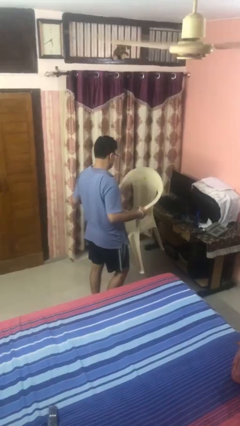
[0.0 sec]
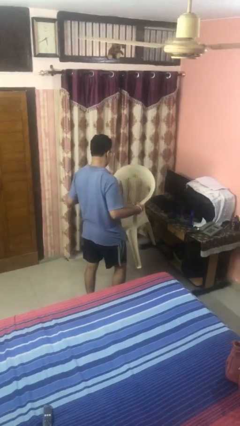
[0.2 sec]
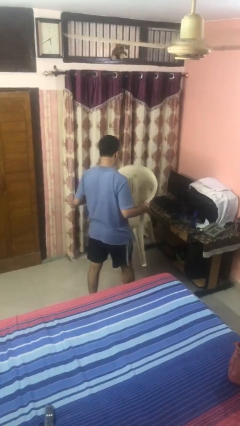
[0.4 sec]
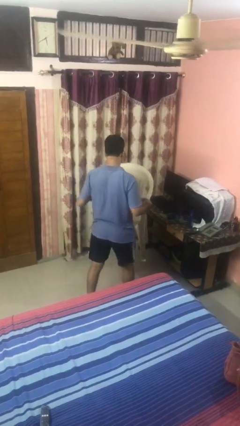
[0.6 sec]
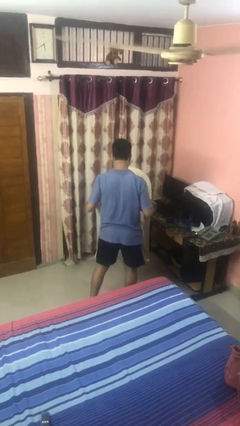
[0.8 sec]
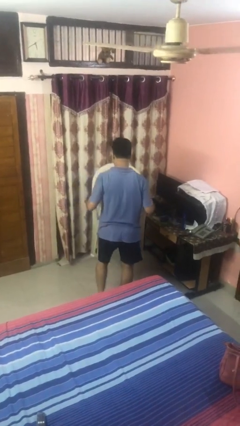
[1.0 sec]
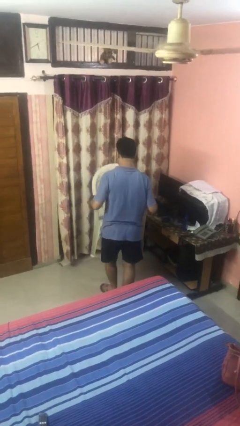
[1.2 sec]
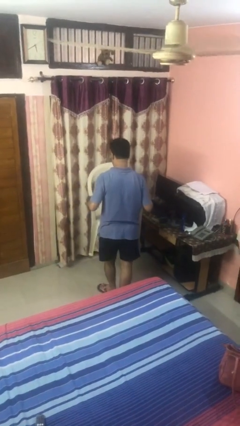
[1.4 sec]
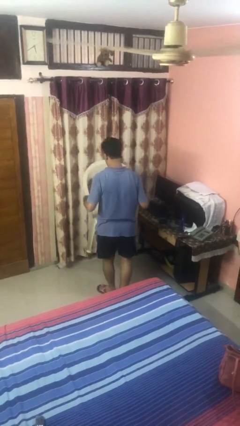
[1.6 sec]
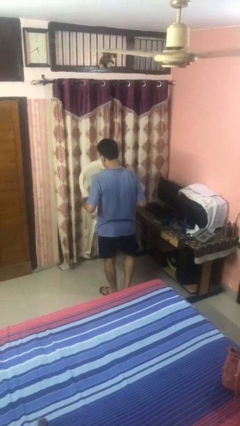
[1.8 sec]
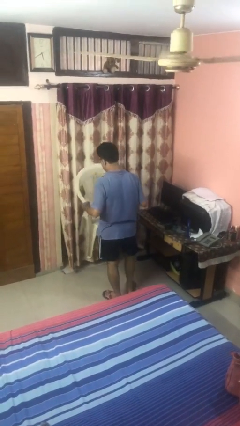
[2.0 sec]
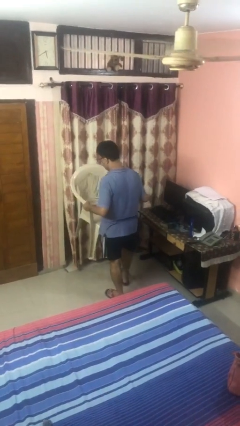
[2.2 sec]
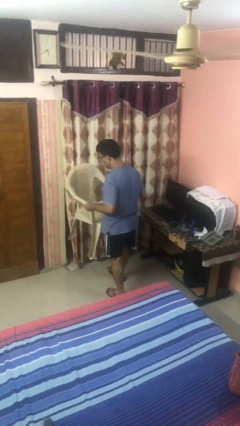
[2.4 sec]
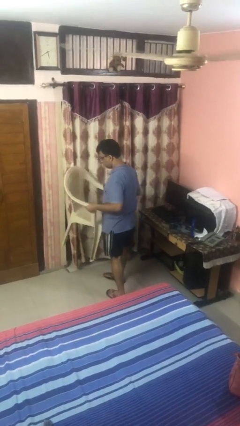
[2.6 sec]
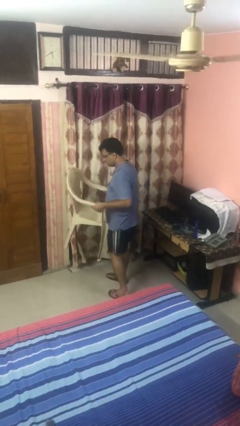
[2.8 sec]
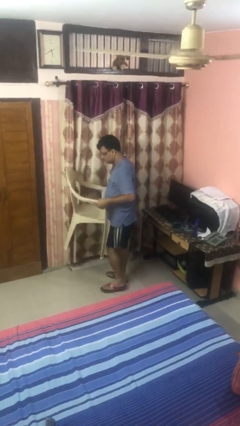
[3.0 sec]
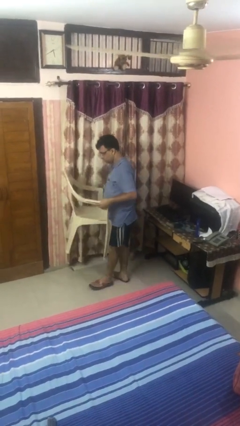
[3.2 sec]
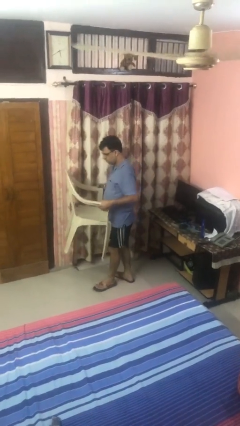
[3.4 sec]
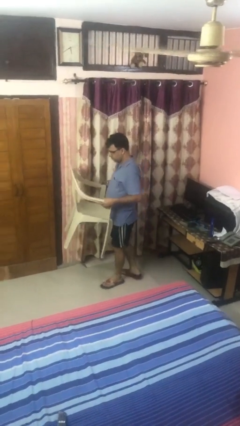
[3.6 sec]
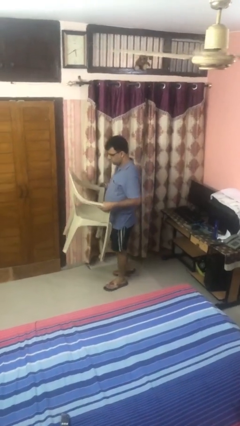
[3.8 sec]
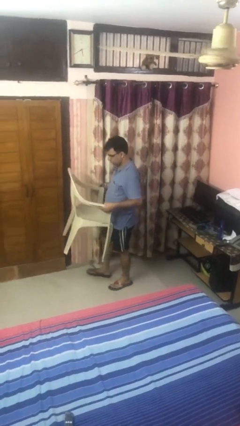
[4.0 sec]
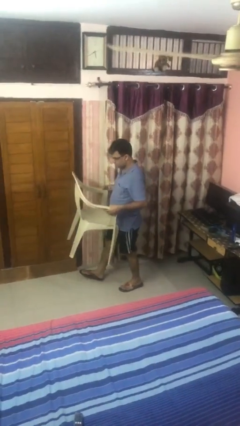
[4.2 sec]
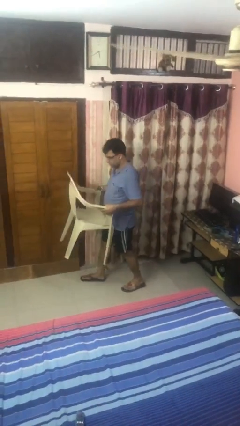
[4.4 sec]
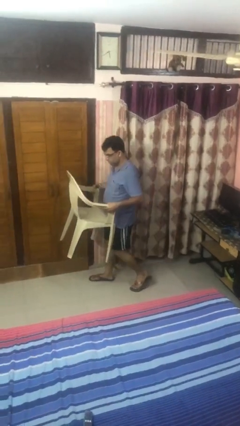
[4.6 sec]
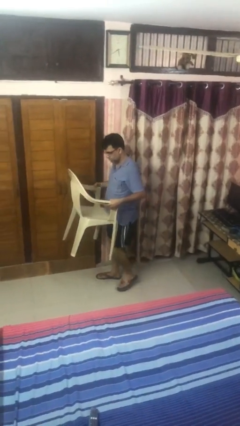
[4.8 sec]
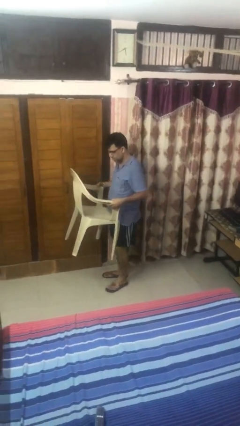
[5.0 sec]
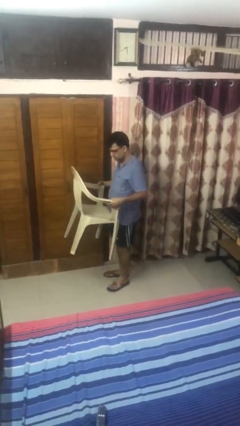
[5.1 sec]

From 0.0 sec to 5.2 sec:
person carries furniture

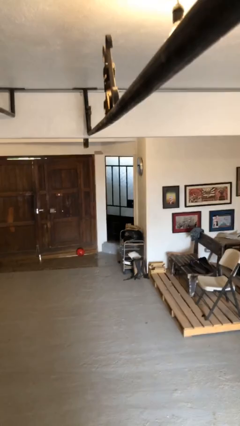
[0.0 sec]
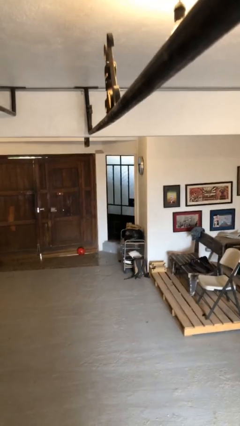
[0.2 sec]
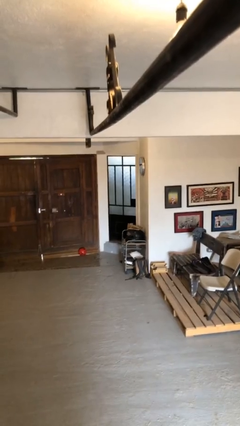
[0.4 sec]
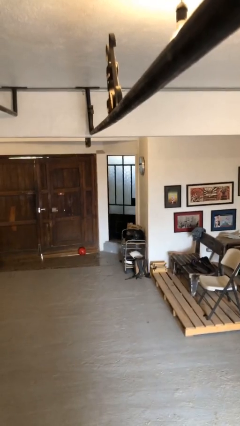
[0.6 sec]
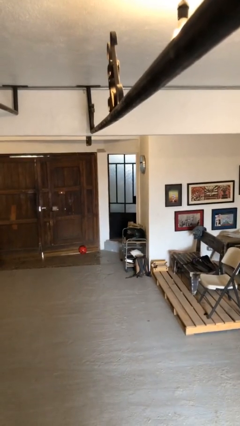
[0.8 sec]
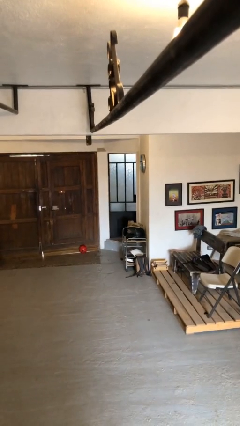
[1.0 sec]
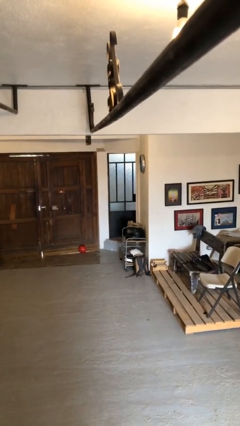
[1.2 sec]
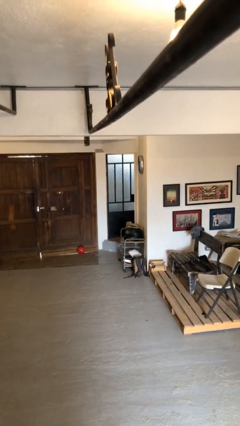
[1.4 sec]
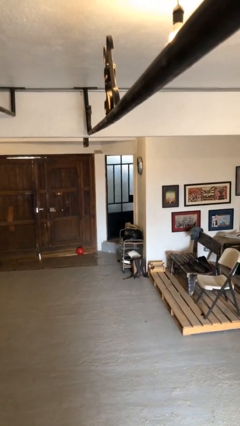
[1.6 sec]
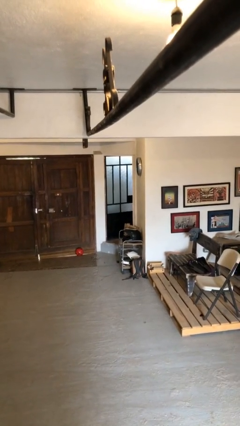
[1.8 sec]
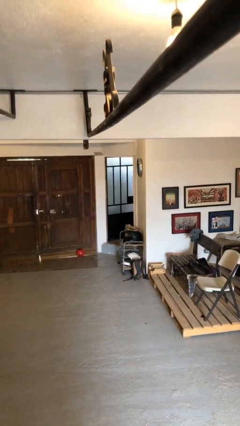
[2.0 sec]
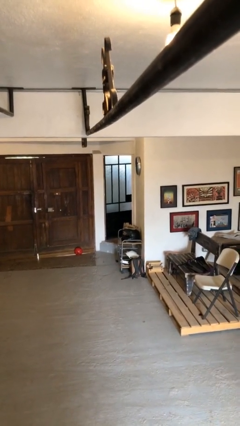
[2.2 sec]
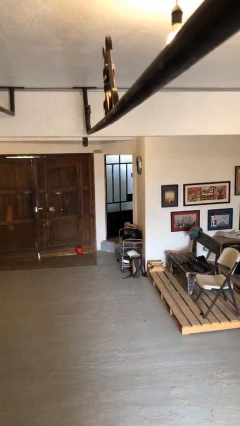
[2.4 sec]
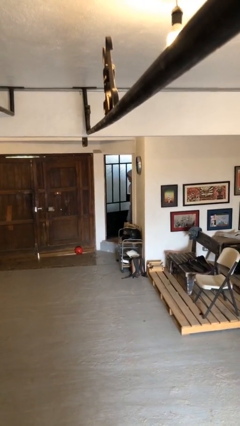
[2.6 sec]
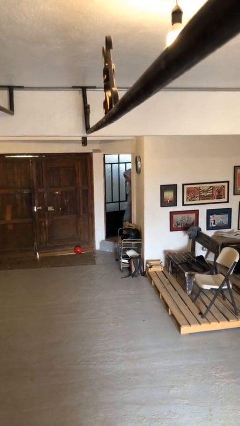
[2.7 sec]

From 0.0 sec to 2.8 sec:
person opens facility door

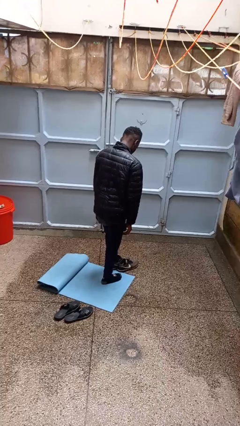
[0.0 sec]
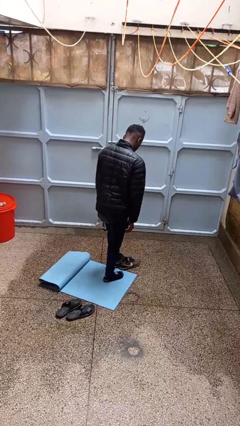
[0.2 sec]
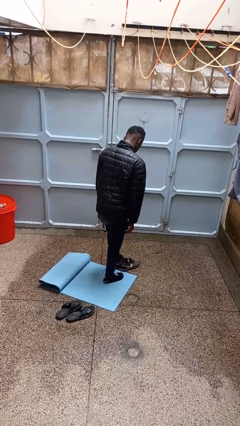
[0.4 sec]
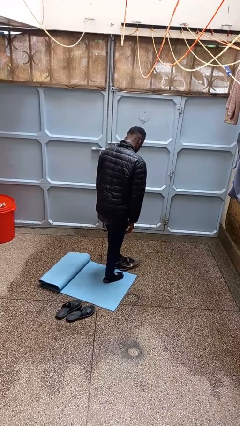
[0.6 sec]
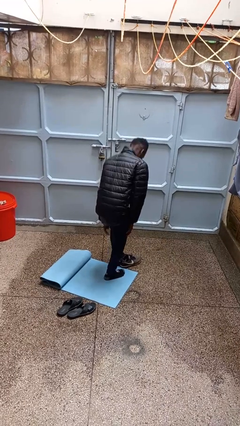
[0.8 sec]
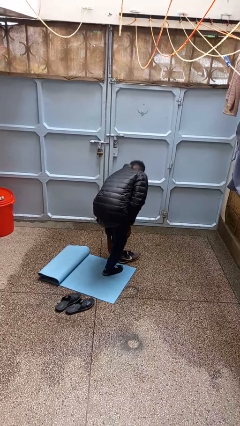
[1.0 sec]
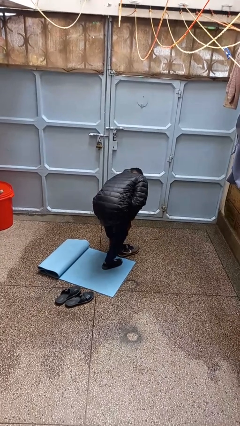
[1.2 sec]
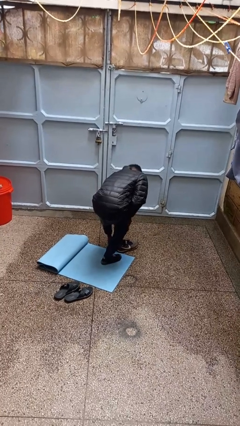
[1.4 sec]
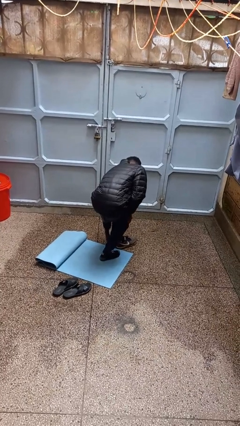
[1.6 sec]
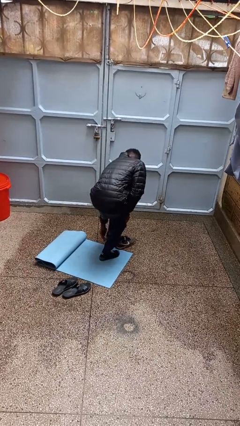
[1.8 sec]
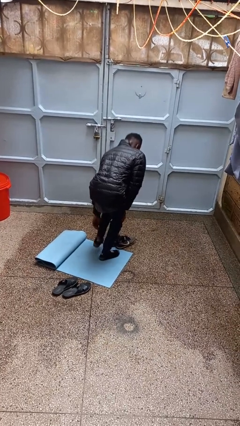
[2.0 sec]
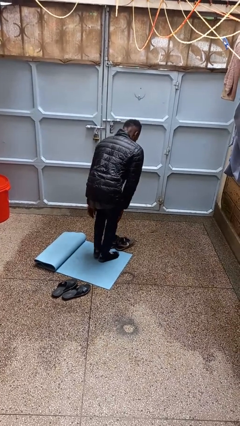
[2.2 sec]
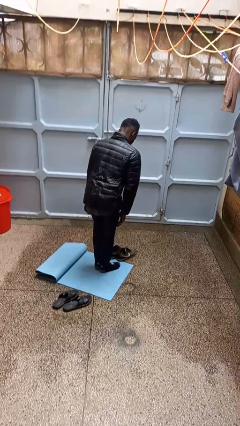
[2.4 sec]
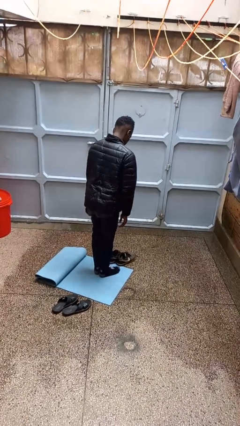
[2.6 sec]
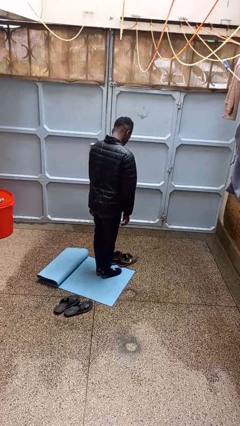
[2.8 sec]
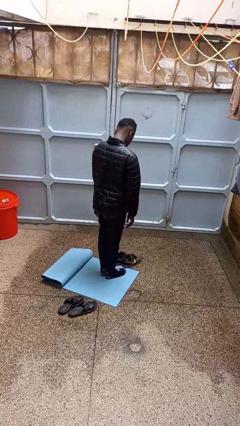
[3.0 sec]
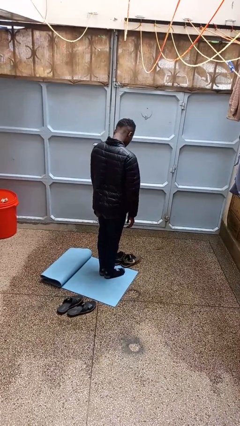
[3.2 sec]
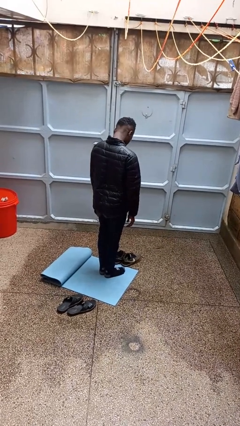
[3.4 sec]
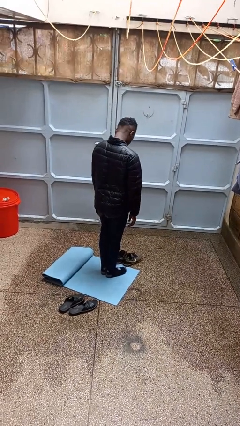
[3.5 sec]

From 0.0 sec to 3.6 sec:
person takes off shoes

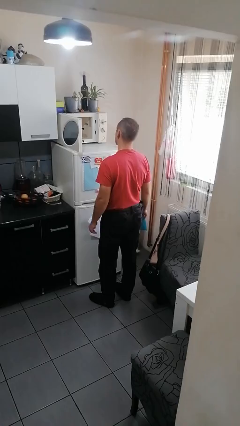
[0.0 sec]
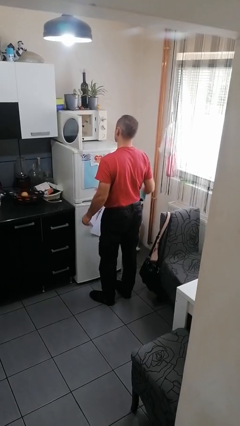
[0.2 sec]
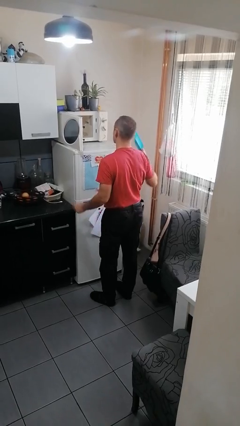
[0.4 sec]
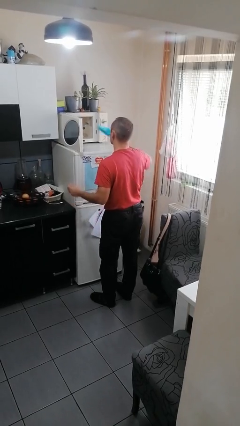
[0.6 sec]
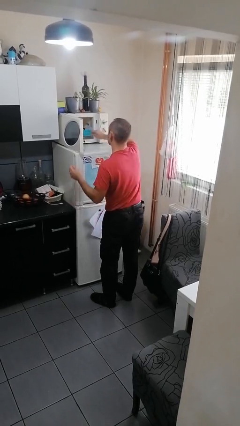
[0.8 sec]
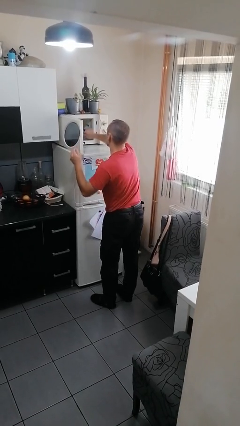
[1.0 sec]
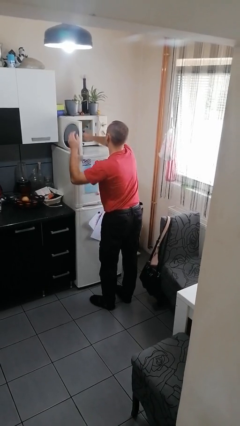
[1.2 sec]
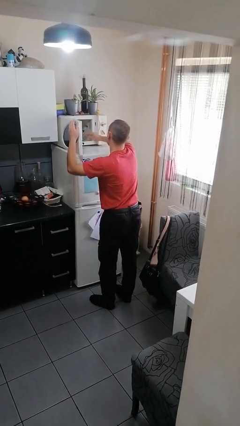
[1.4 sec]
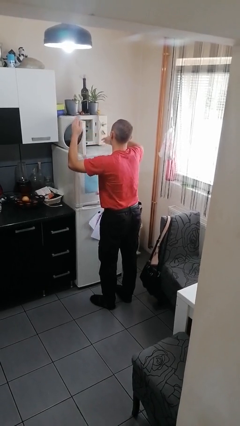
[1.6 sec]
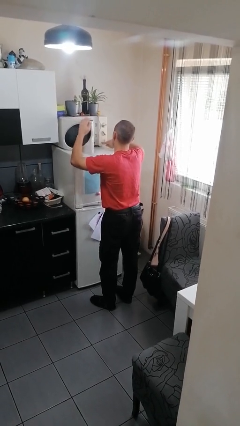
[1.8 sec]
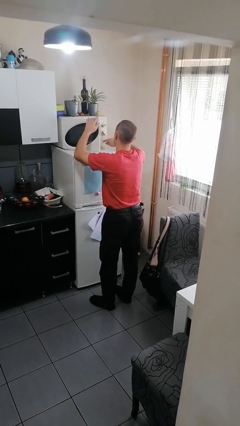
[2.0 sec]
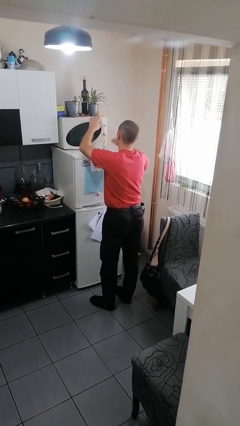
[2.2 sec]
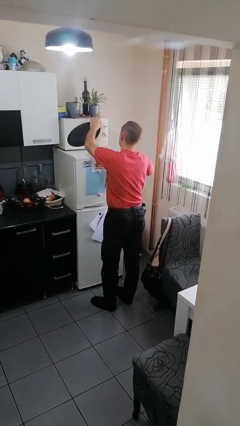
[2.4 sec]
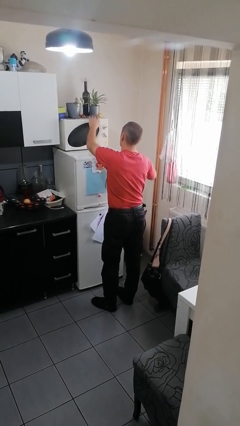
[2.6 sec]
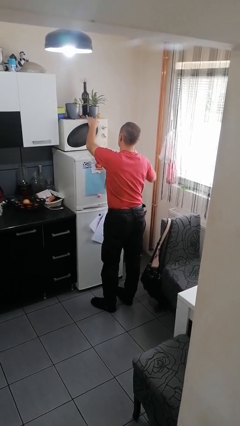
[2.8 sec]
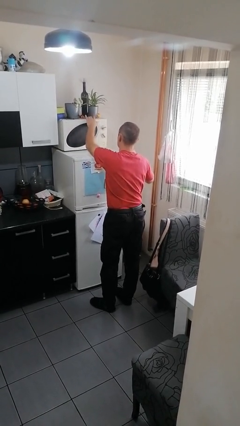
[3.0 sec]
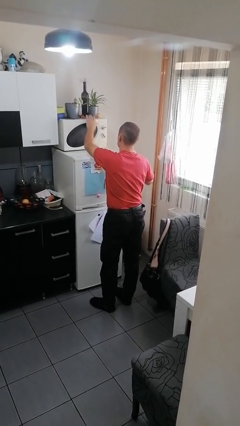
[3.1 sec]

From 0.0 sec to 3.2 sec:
person puts object into microwave

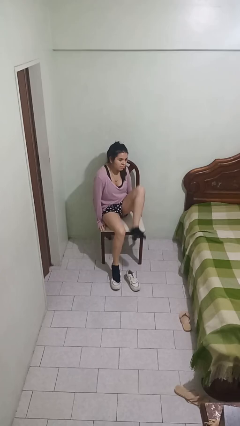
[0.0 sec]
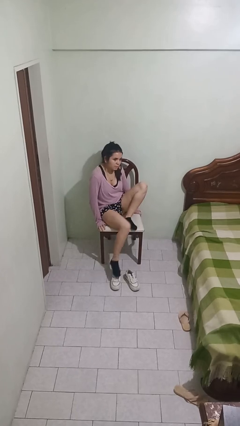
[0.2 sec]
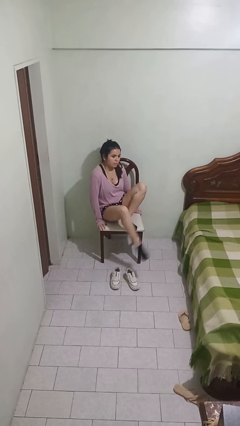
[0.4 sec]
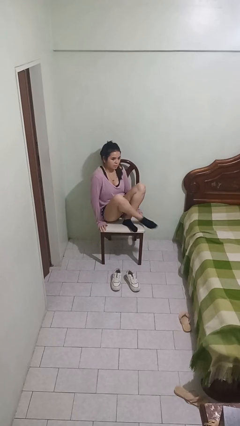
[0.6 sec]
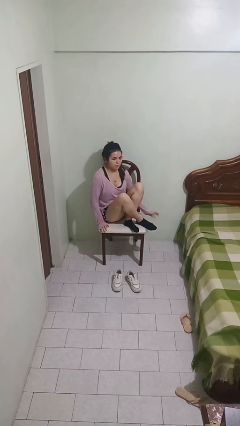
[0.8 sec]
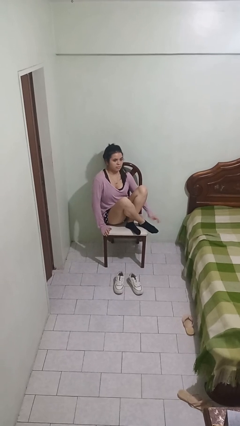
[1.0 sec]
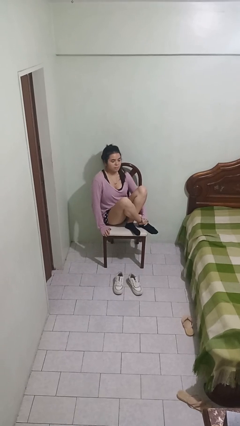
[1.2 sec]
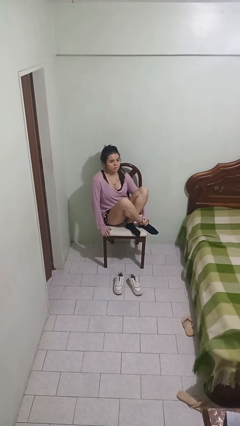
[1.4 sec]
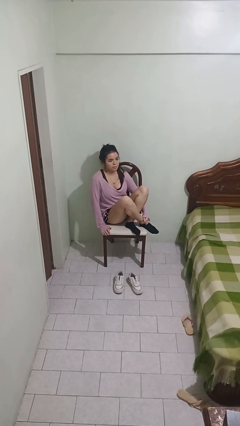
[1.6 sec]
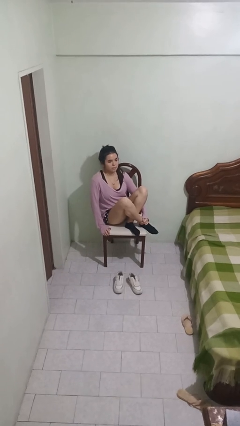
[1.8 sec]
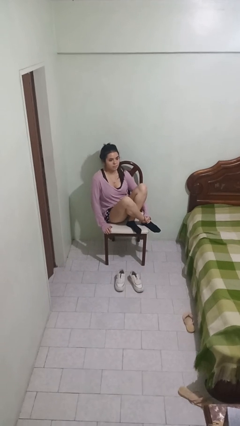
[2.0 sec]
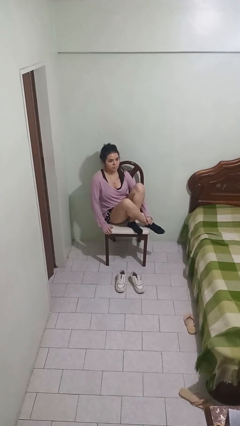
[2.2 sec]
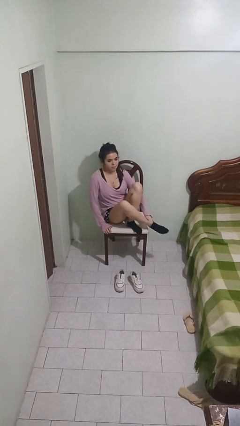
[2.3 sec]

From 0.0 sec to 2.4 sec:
person puts feet up

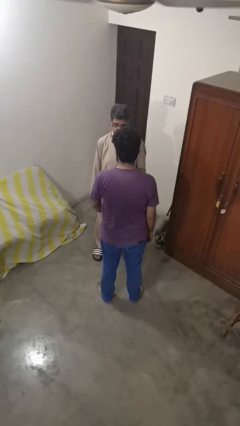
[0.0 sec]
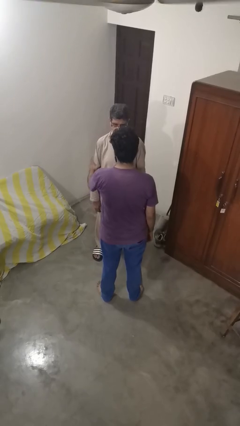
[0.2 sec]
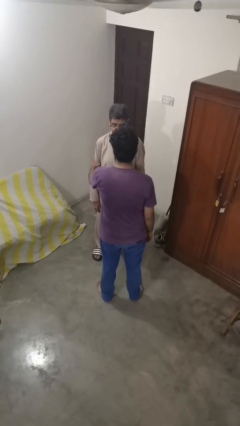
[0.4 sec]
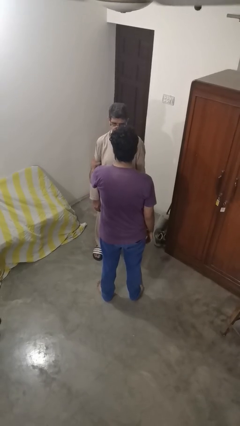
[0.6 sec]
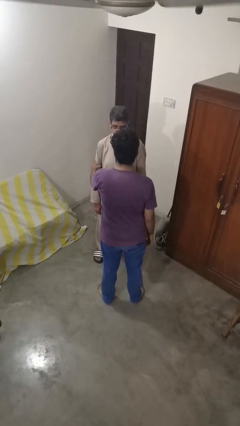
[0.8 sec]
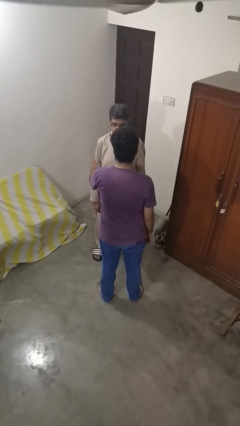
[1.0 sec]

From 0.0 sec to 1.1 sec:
person grabs person by bicep
